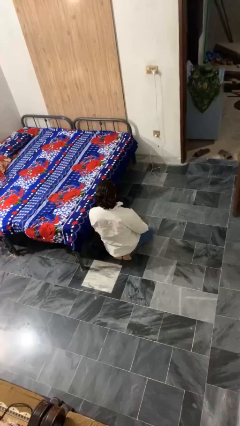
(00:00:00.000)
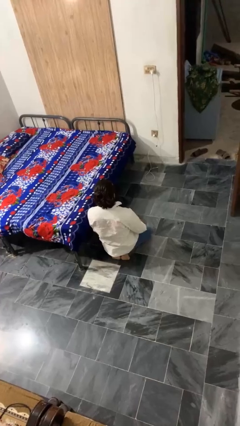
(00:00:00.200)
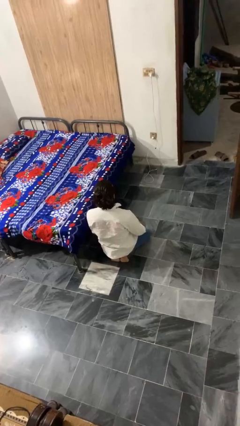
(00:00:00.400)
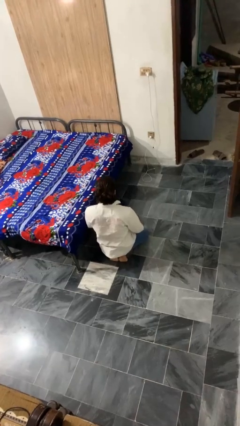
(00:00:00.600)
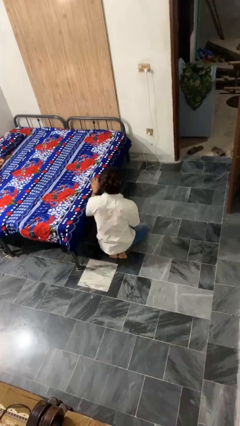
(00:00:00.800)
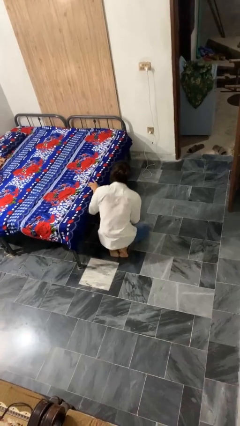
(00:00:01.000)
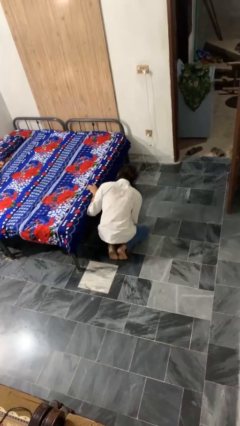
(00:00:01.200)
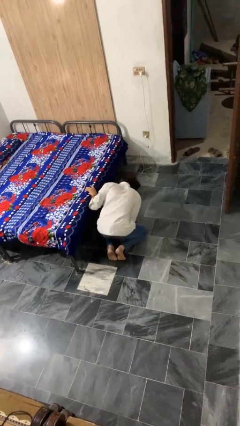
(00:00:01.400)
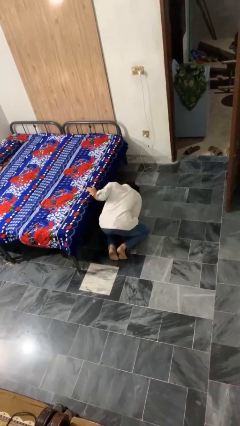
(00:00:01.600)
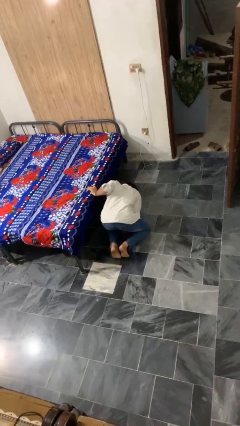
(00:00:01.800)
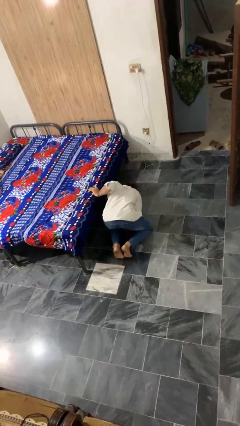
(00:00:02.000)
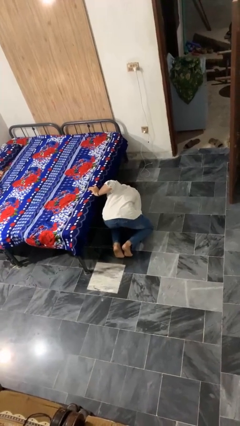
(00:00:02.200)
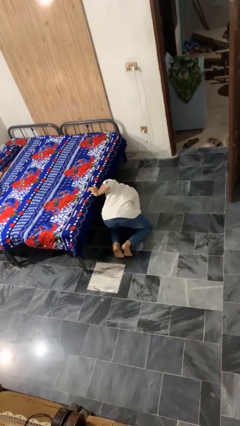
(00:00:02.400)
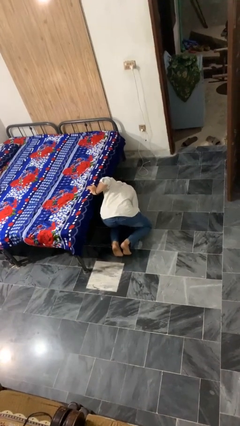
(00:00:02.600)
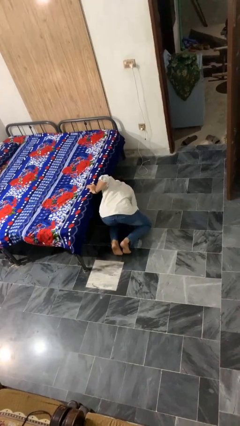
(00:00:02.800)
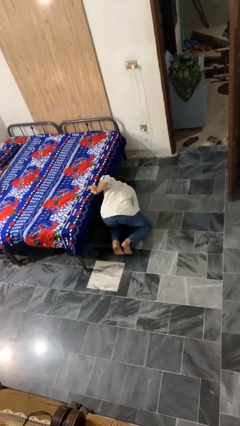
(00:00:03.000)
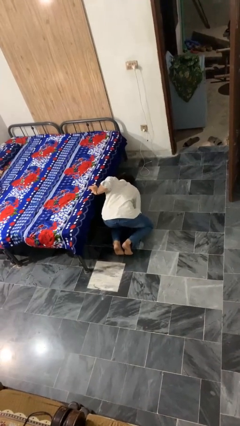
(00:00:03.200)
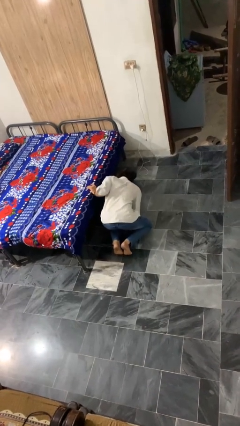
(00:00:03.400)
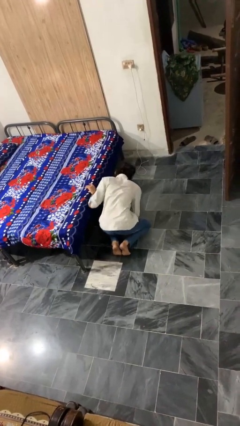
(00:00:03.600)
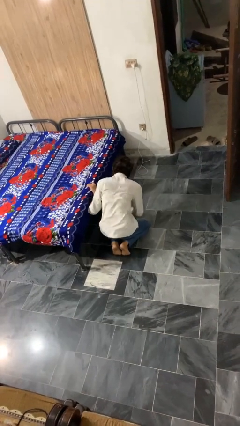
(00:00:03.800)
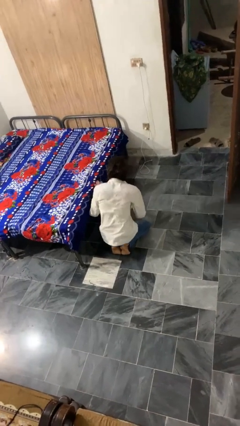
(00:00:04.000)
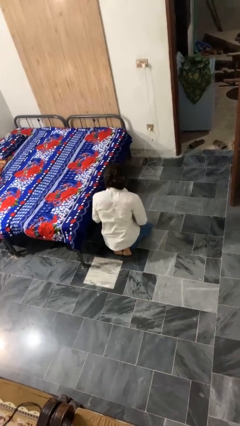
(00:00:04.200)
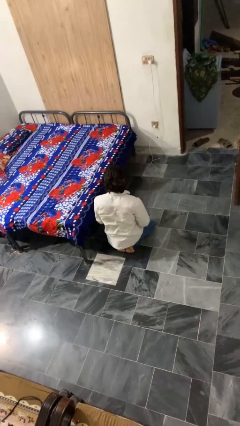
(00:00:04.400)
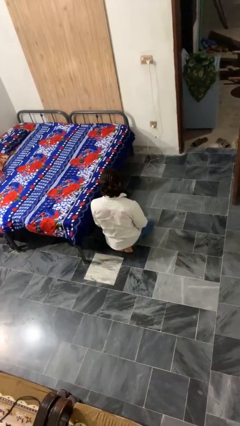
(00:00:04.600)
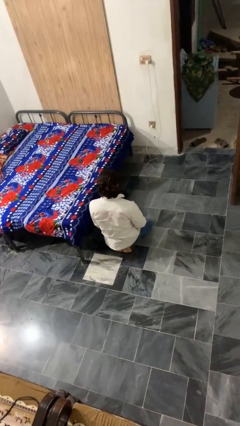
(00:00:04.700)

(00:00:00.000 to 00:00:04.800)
person searches under bed

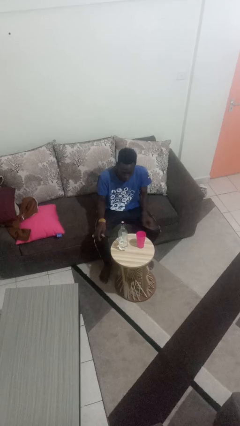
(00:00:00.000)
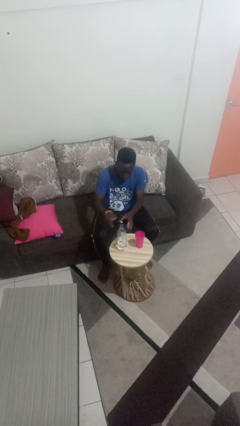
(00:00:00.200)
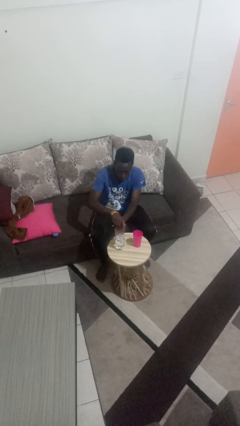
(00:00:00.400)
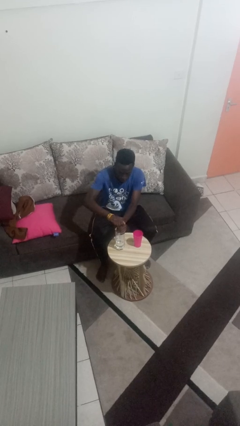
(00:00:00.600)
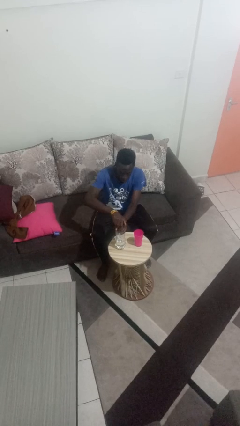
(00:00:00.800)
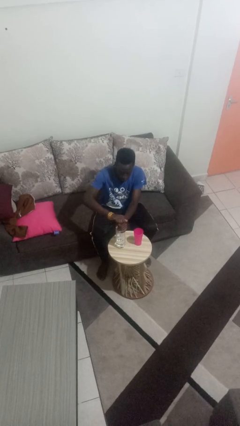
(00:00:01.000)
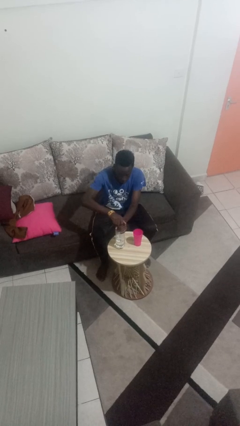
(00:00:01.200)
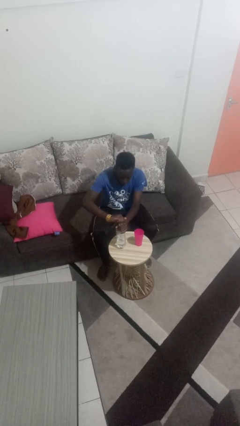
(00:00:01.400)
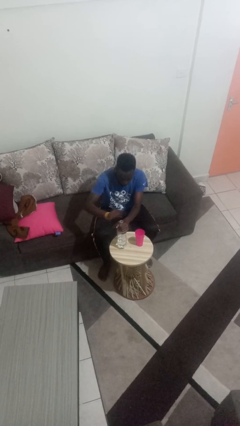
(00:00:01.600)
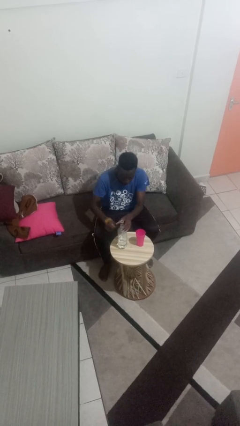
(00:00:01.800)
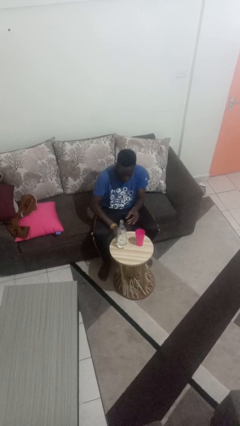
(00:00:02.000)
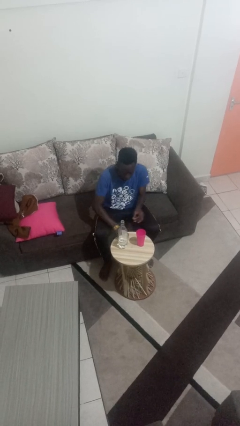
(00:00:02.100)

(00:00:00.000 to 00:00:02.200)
person unscrews lid from bottle

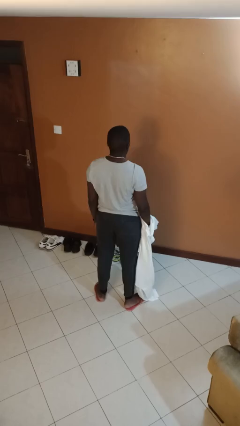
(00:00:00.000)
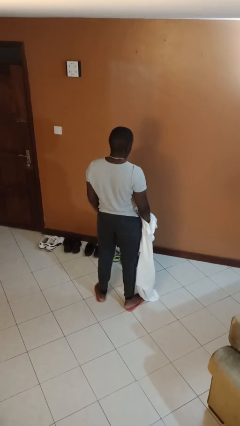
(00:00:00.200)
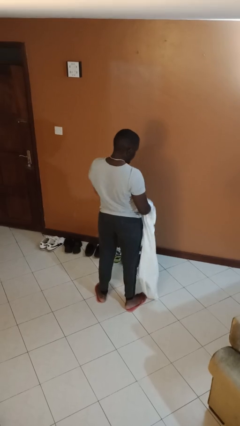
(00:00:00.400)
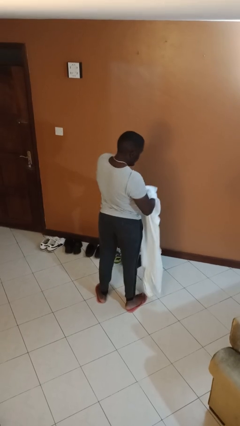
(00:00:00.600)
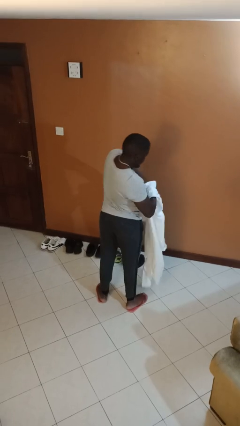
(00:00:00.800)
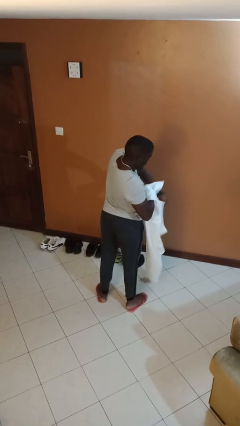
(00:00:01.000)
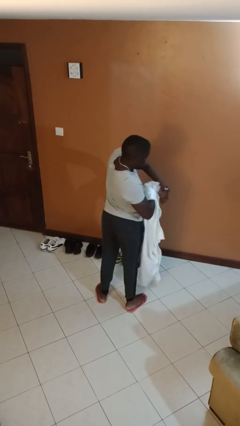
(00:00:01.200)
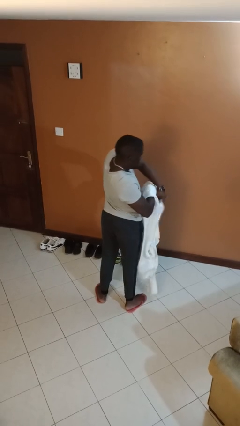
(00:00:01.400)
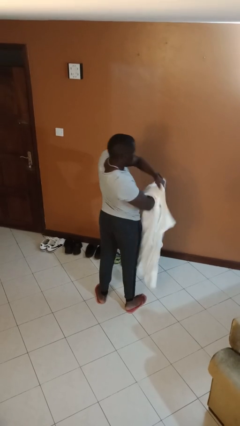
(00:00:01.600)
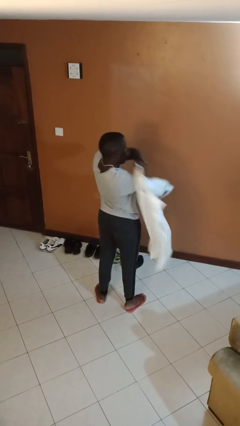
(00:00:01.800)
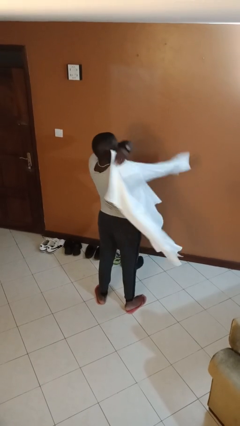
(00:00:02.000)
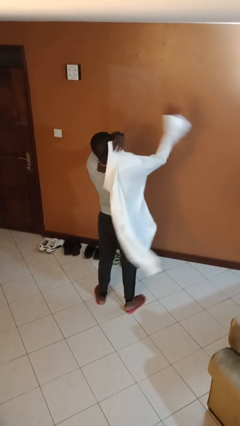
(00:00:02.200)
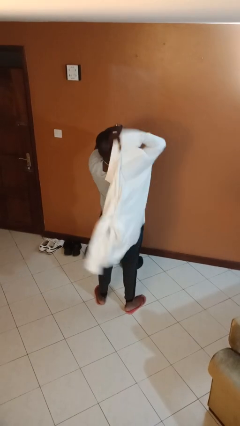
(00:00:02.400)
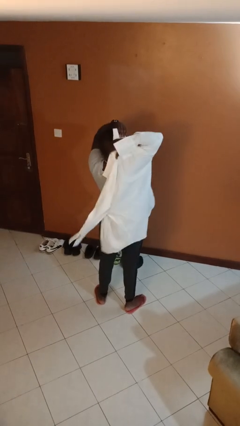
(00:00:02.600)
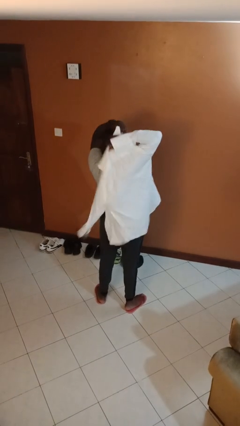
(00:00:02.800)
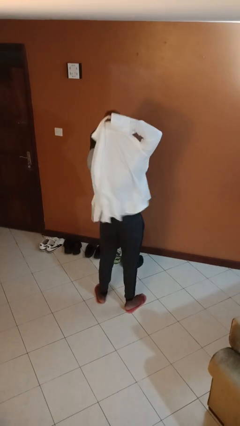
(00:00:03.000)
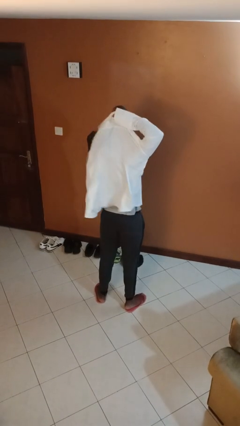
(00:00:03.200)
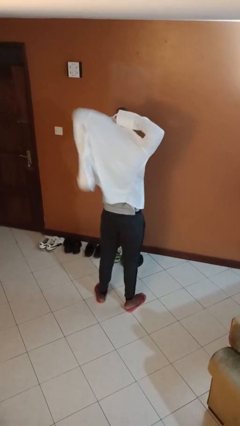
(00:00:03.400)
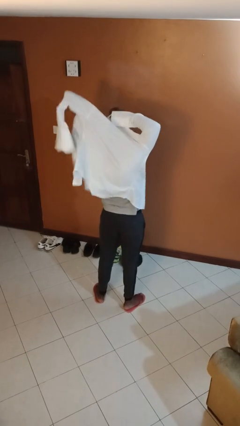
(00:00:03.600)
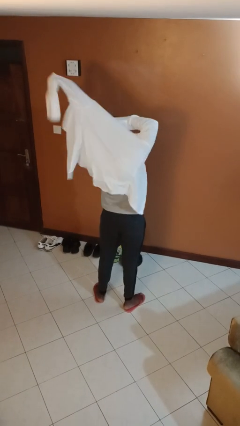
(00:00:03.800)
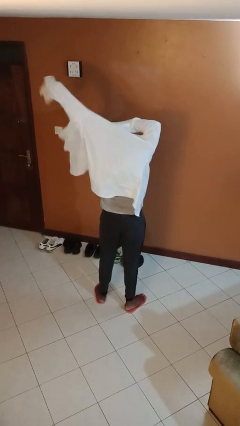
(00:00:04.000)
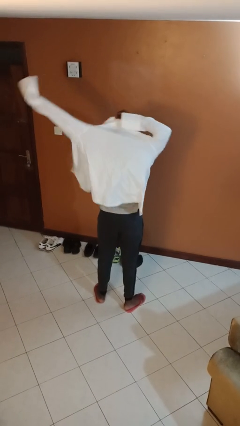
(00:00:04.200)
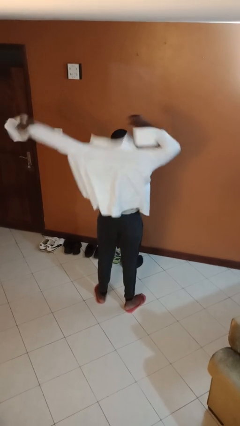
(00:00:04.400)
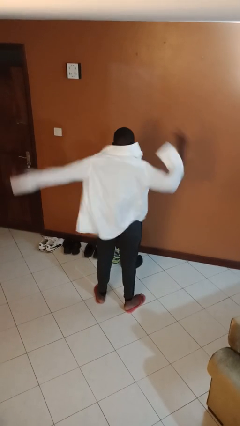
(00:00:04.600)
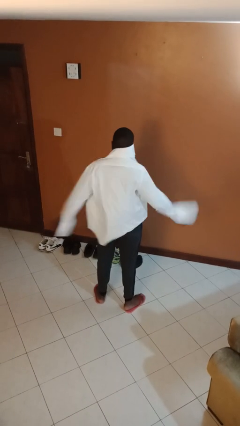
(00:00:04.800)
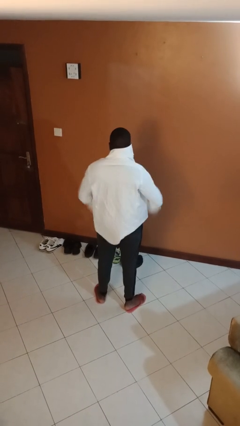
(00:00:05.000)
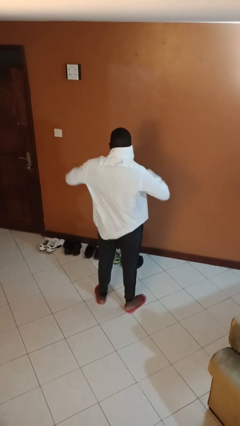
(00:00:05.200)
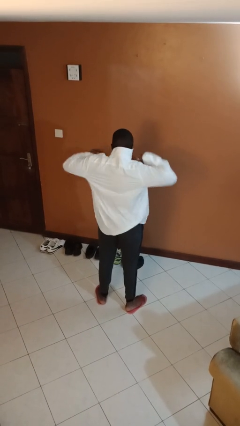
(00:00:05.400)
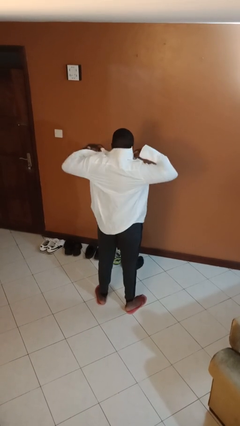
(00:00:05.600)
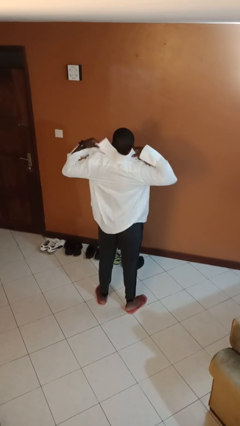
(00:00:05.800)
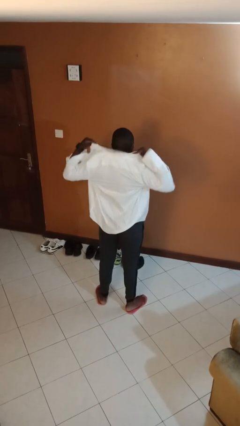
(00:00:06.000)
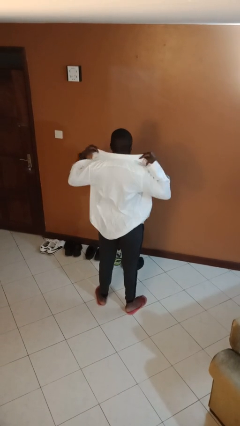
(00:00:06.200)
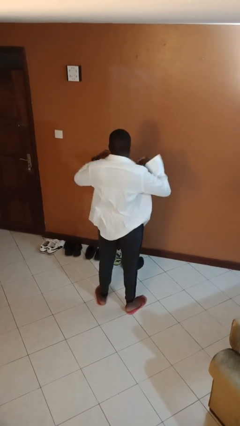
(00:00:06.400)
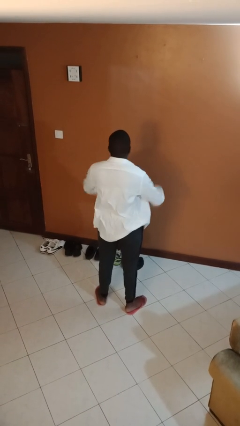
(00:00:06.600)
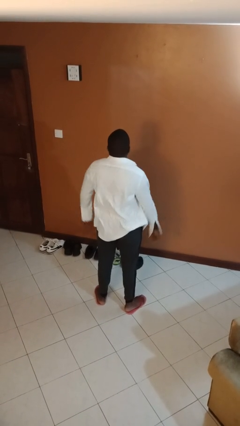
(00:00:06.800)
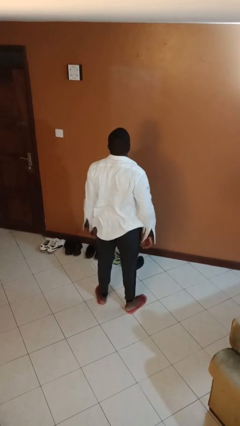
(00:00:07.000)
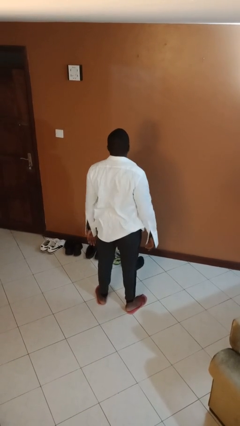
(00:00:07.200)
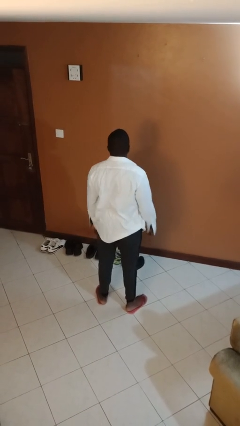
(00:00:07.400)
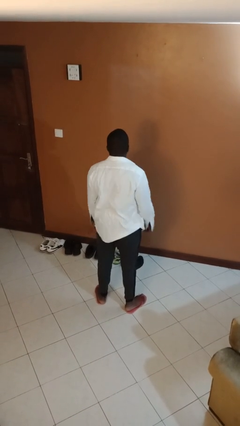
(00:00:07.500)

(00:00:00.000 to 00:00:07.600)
person puts on shirt

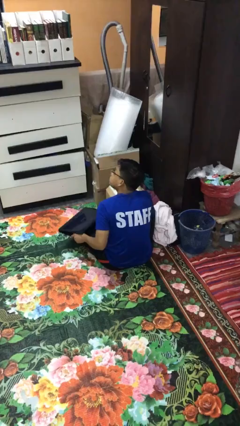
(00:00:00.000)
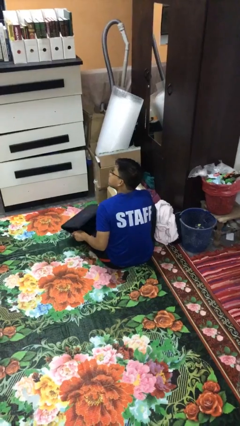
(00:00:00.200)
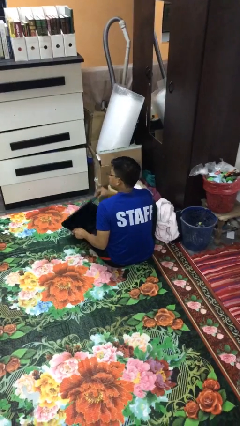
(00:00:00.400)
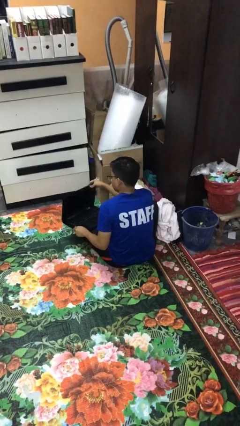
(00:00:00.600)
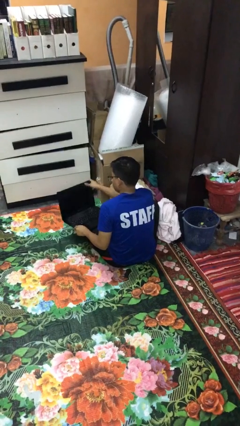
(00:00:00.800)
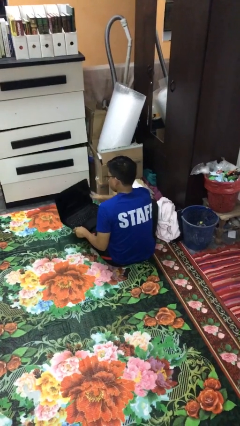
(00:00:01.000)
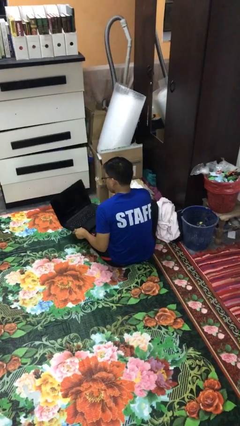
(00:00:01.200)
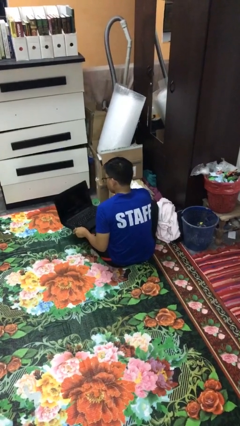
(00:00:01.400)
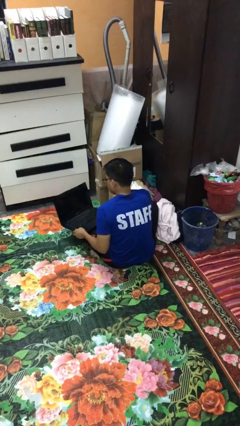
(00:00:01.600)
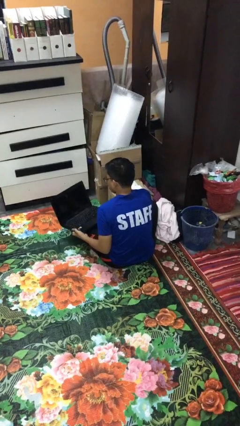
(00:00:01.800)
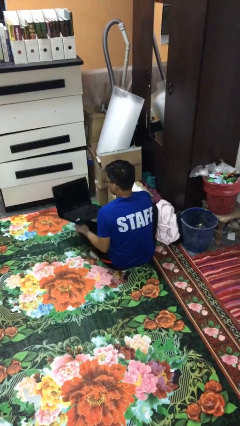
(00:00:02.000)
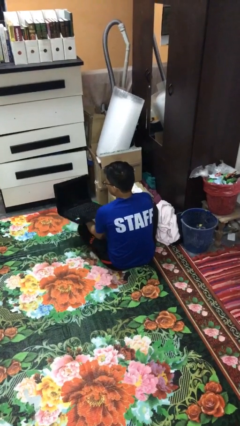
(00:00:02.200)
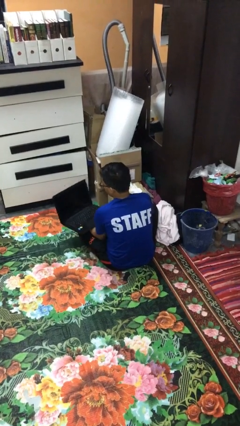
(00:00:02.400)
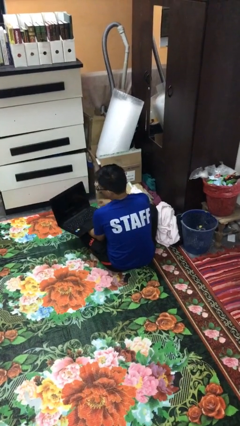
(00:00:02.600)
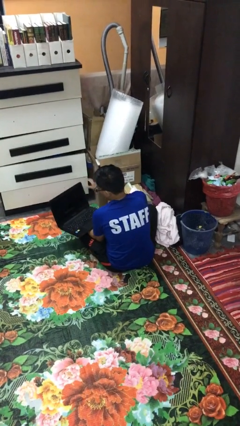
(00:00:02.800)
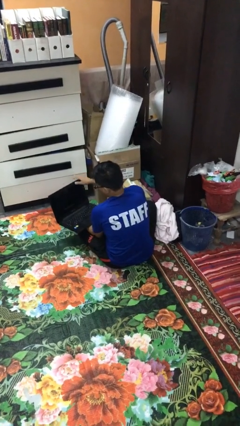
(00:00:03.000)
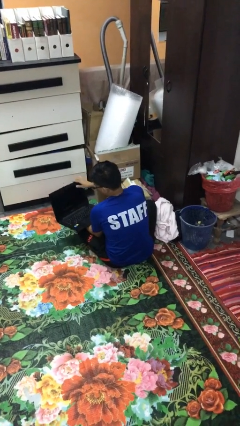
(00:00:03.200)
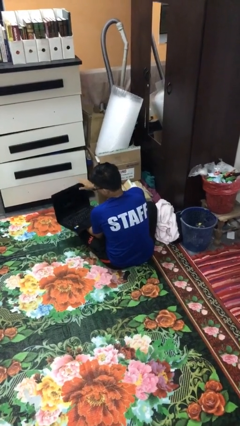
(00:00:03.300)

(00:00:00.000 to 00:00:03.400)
person opens laptop
